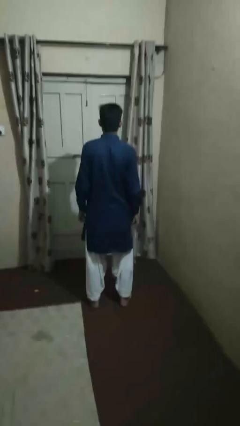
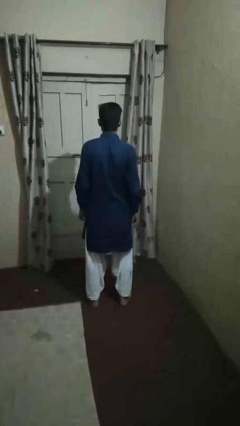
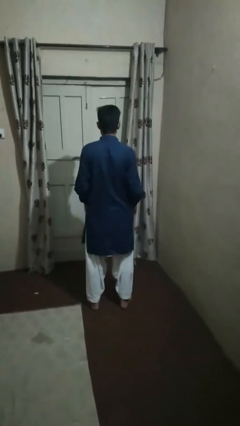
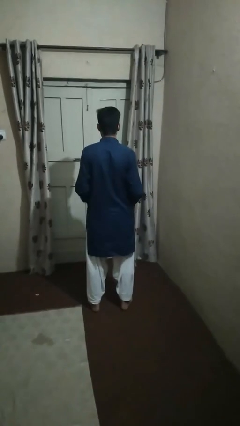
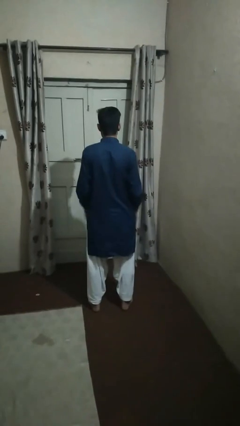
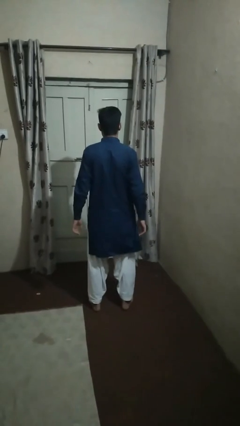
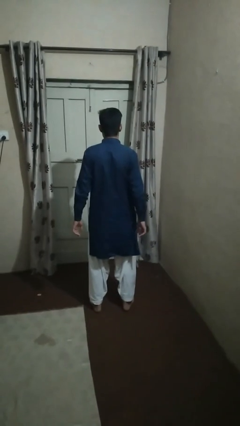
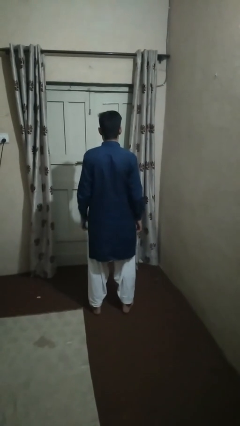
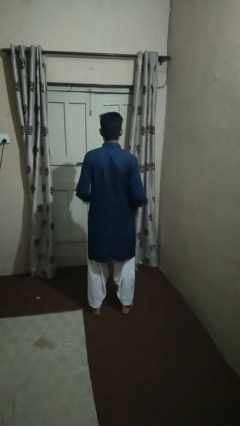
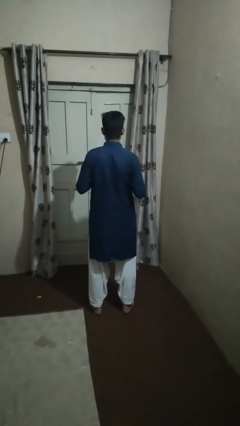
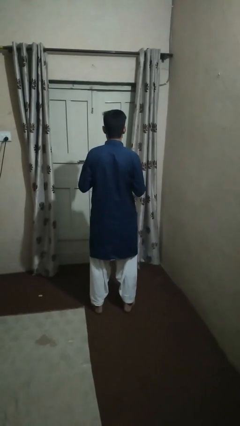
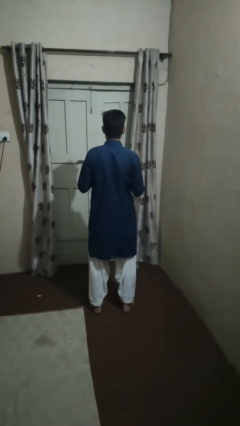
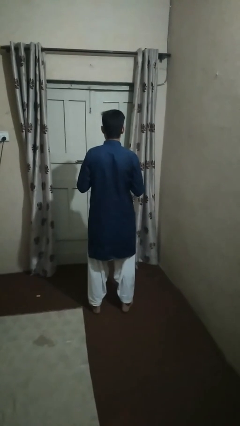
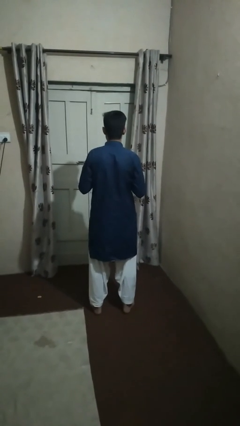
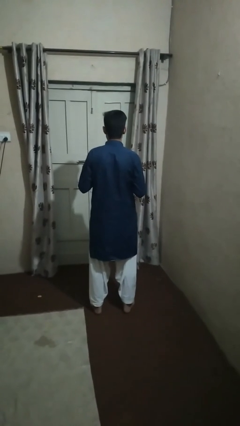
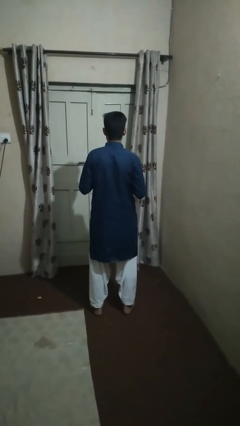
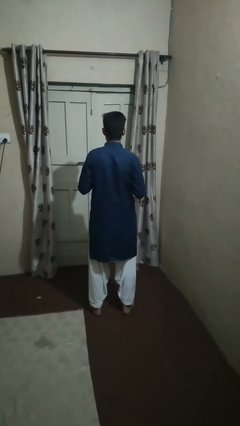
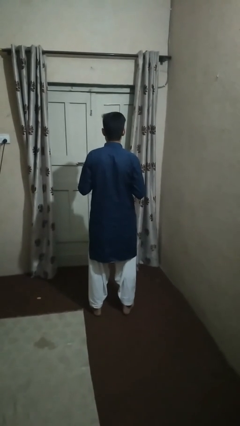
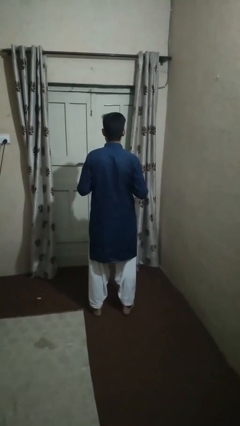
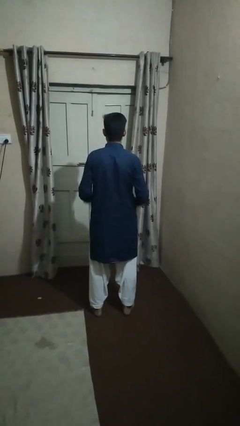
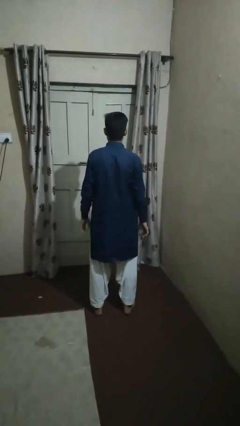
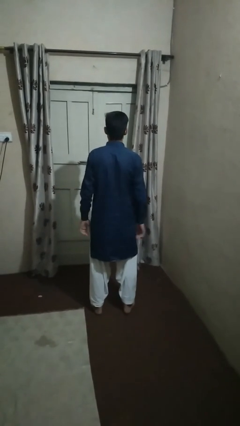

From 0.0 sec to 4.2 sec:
person unbuttons shirt

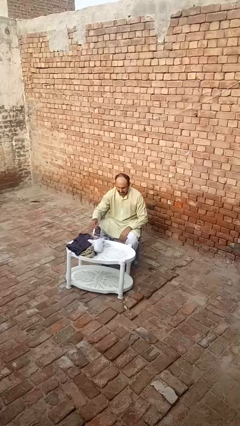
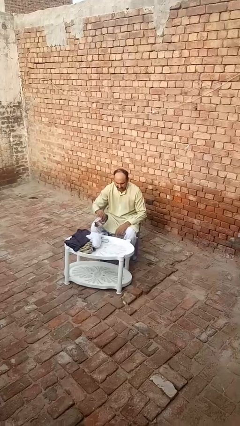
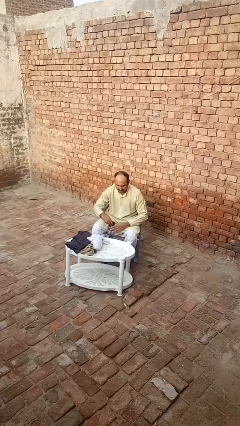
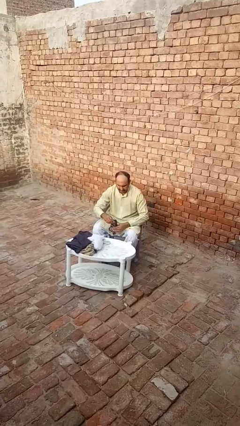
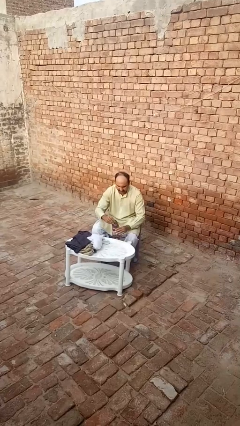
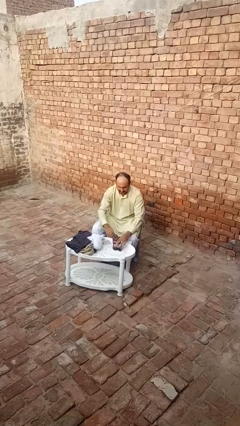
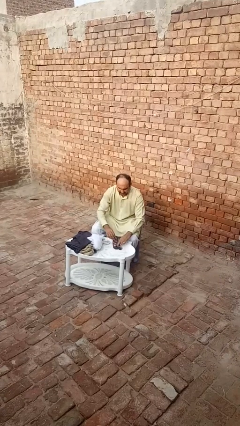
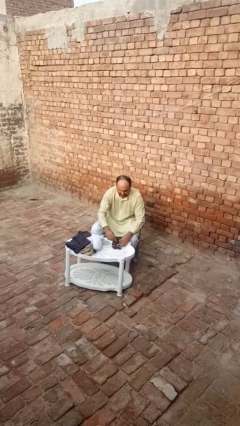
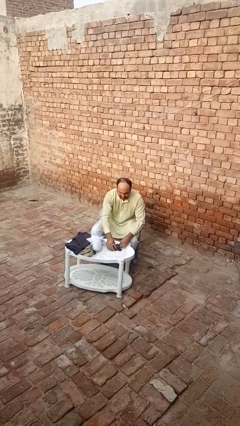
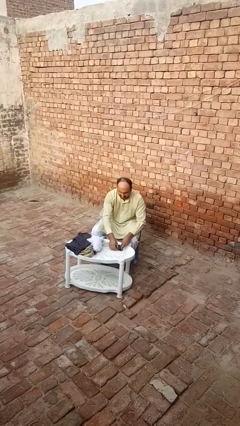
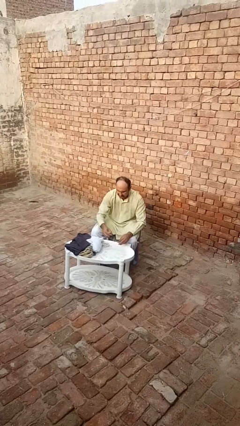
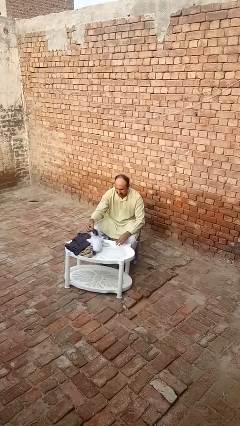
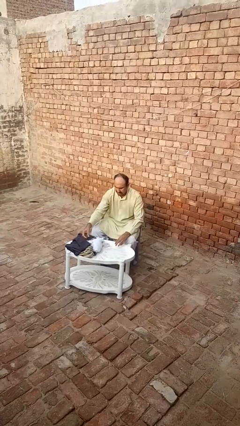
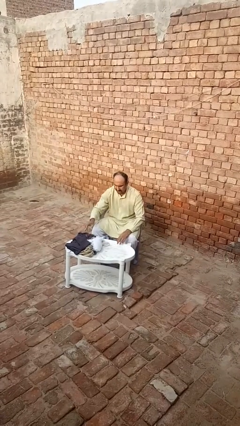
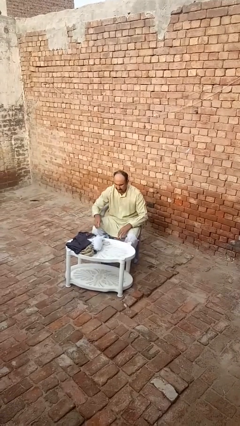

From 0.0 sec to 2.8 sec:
person folds socks

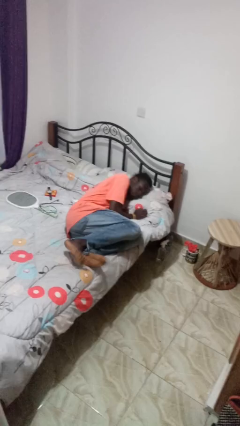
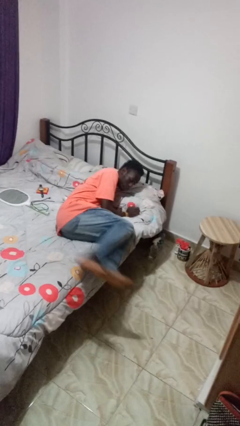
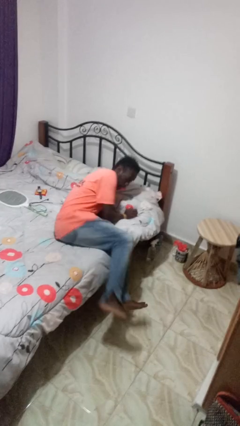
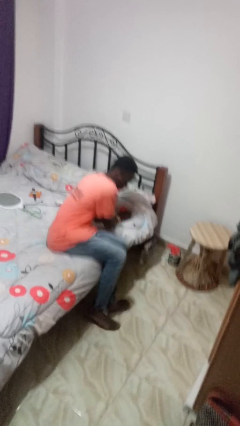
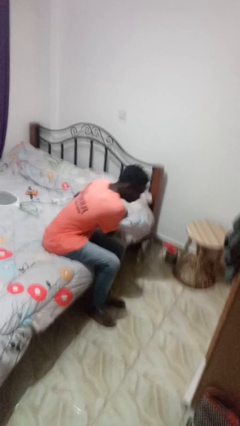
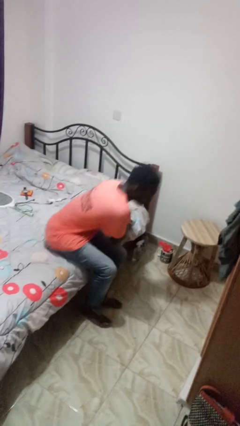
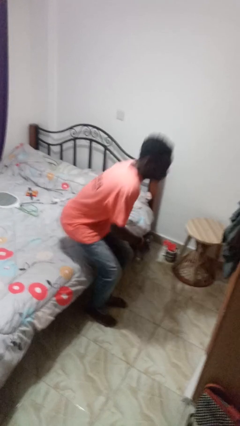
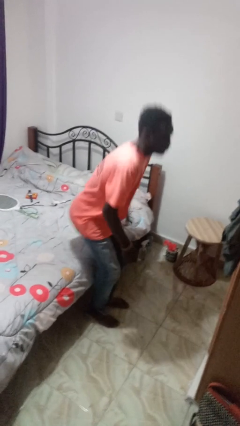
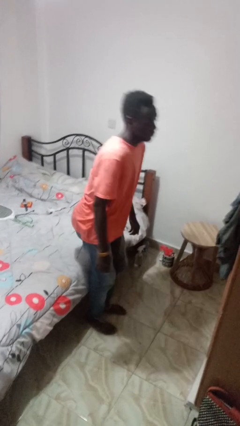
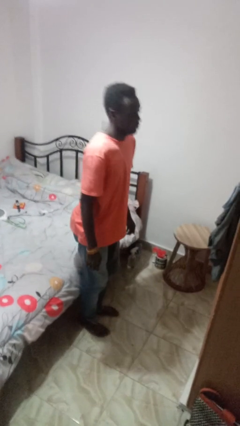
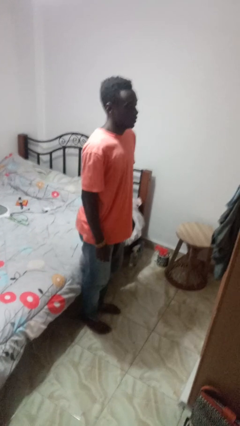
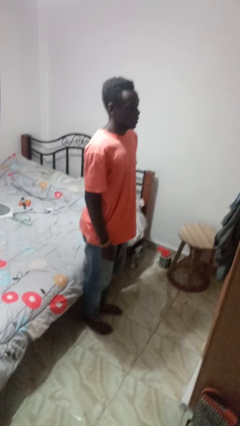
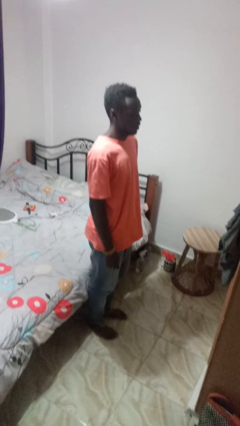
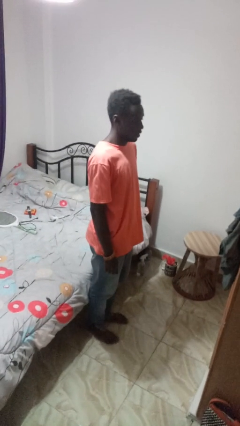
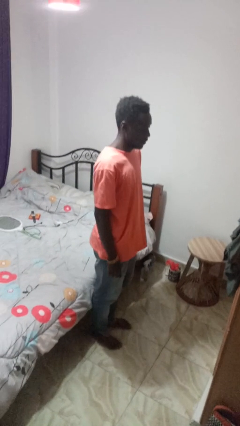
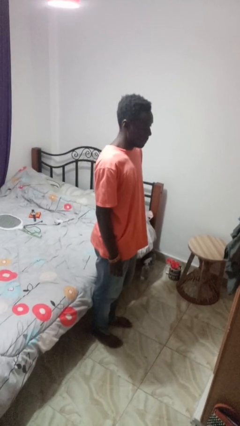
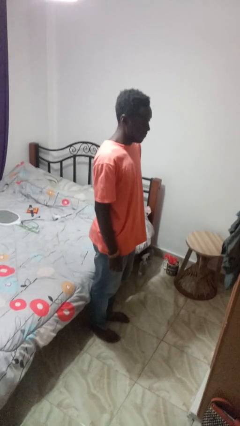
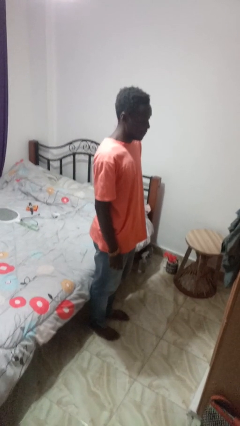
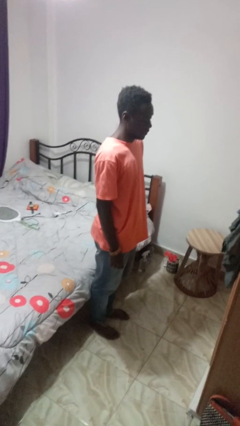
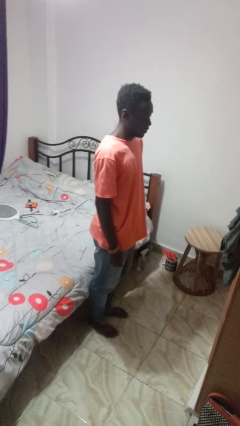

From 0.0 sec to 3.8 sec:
person stands up

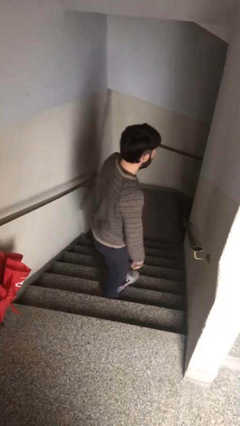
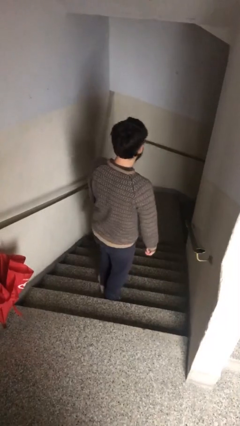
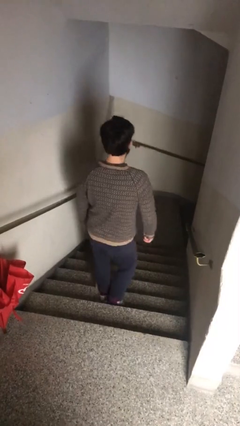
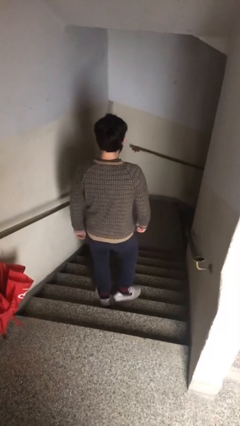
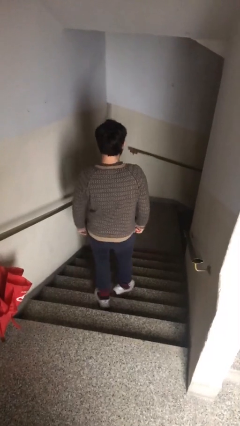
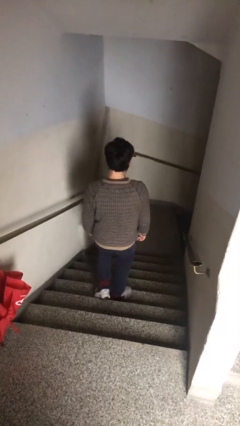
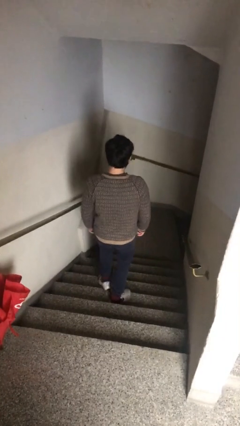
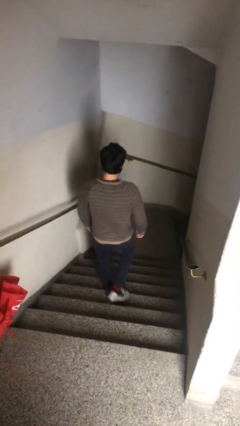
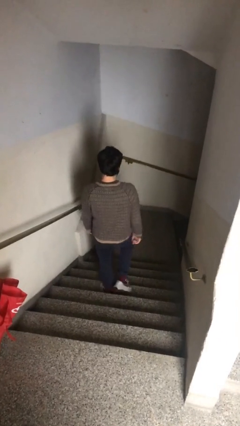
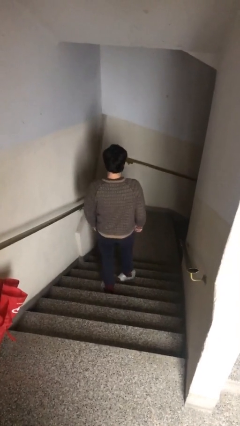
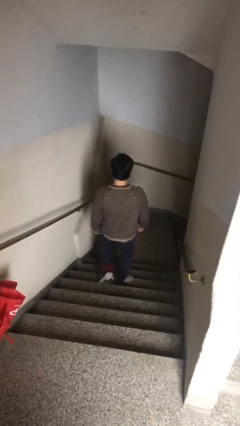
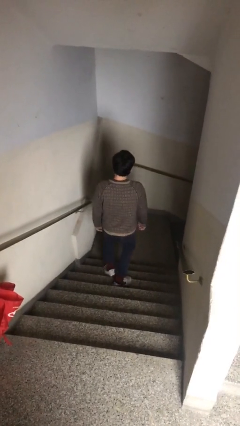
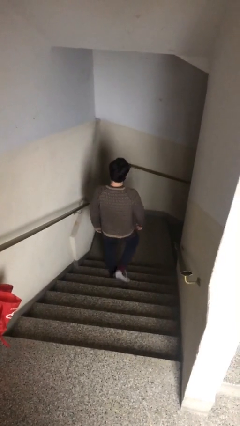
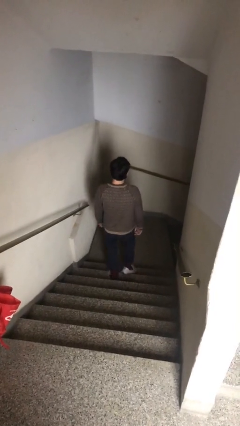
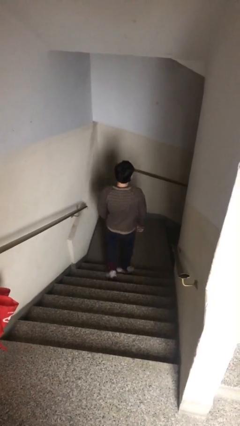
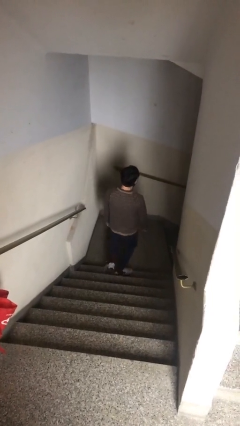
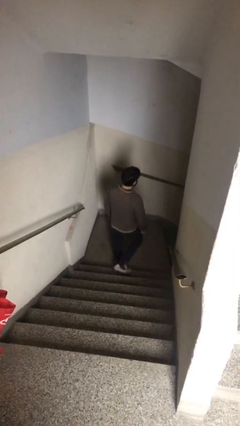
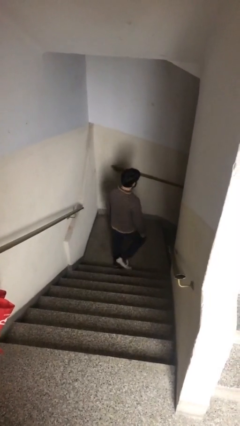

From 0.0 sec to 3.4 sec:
person climbs down stairs

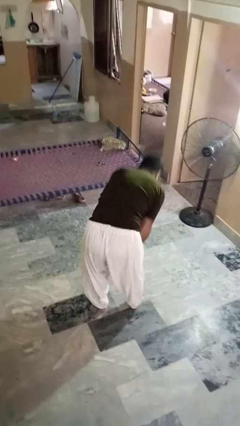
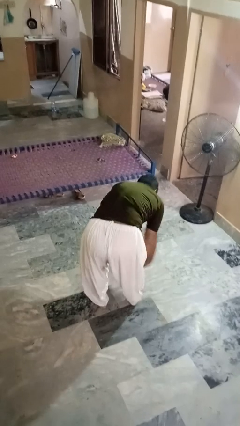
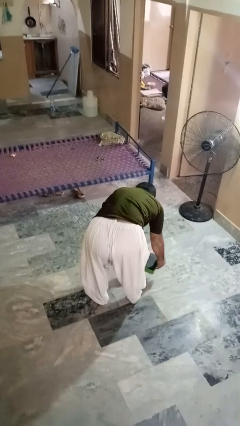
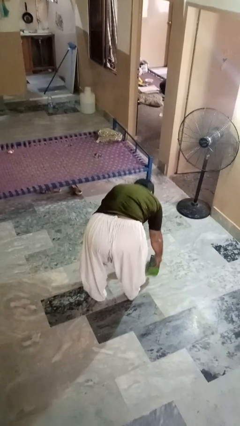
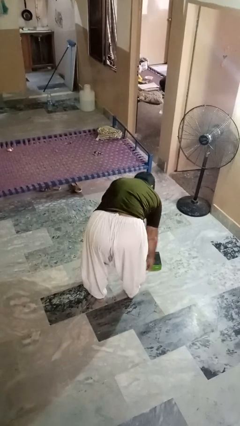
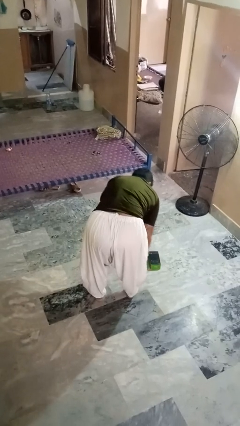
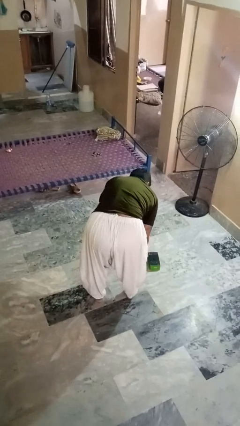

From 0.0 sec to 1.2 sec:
person catches dropped object

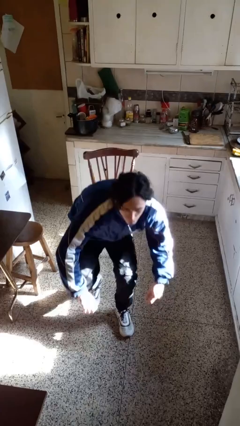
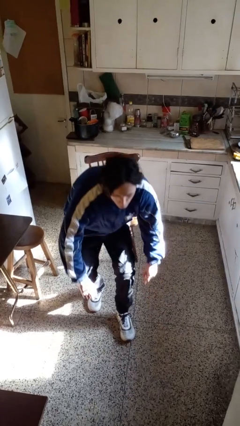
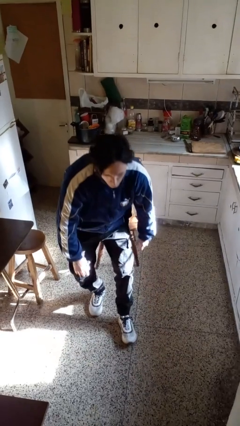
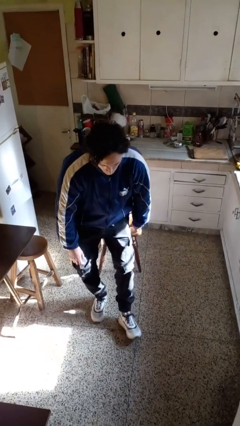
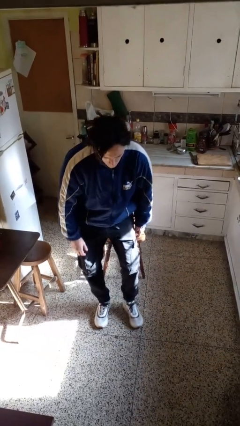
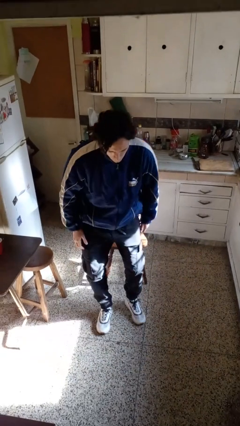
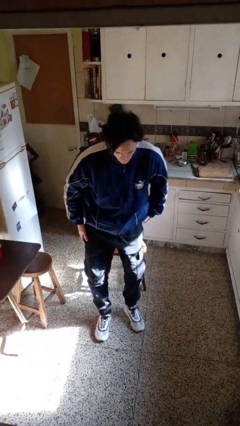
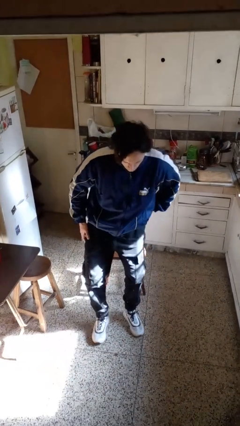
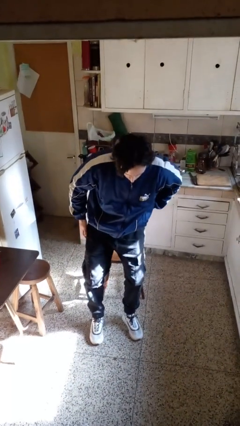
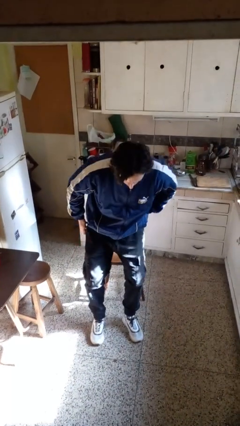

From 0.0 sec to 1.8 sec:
person stands up from floor

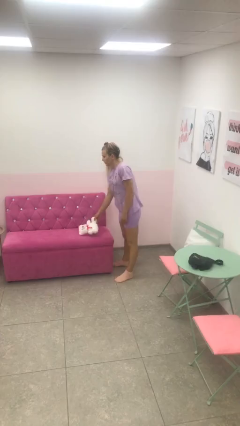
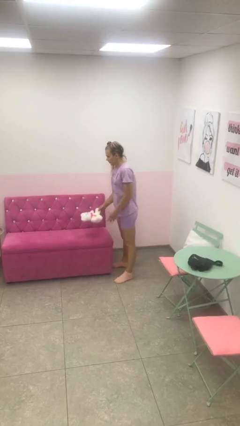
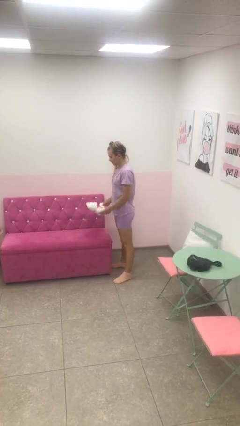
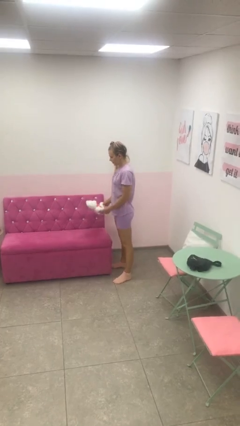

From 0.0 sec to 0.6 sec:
person picks up object from couch
